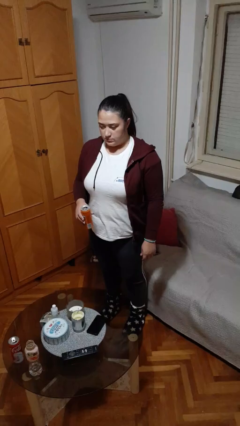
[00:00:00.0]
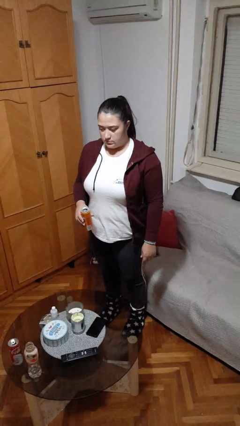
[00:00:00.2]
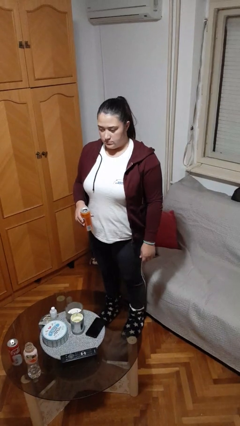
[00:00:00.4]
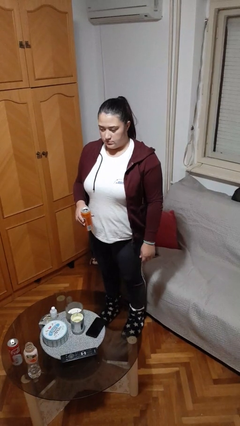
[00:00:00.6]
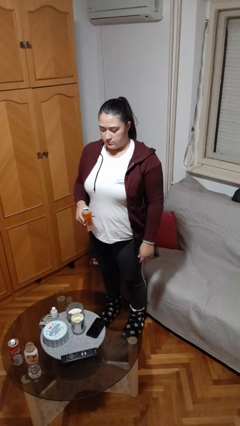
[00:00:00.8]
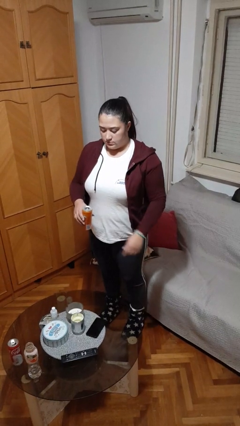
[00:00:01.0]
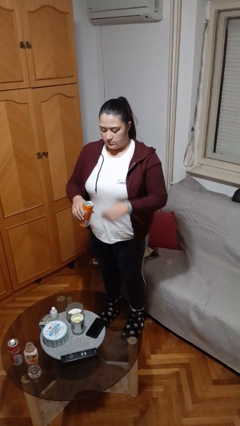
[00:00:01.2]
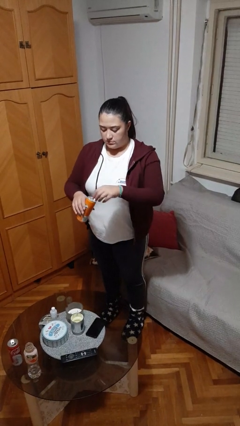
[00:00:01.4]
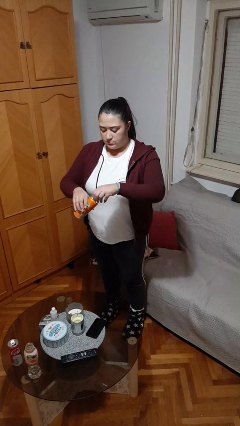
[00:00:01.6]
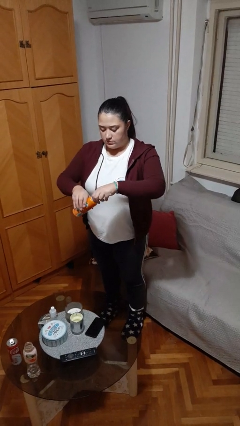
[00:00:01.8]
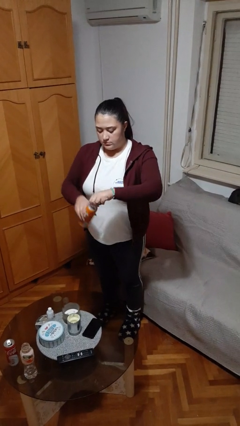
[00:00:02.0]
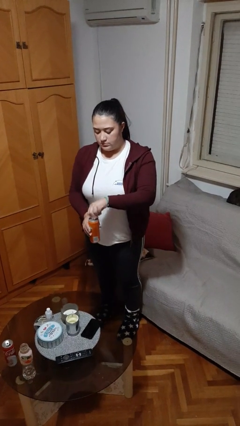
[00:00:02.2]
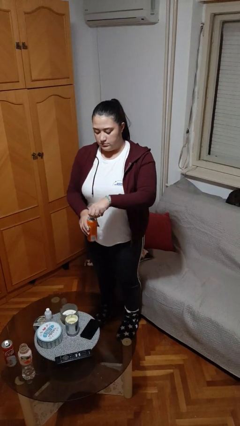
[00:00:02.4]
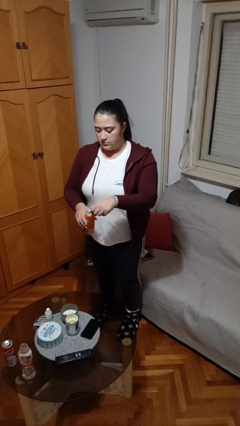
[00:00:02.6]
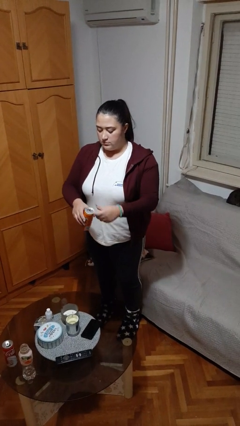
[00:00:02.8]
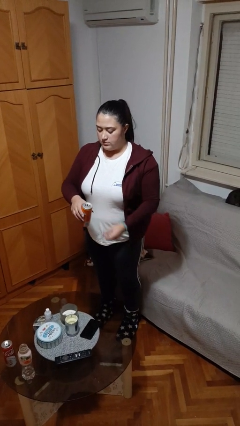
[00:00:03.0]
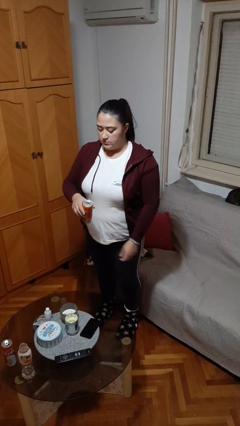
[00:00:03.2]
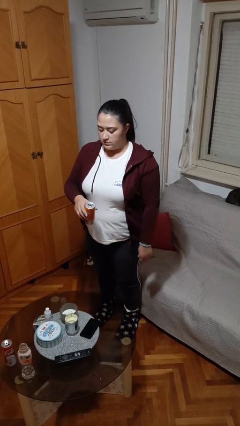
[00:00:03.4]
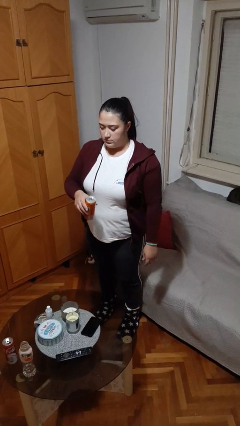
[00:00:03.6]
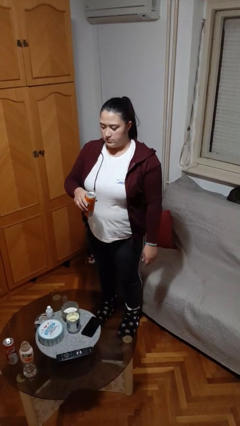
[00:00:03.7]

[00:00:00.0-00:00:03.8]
person opens beverage can

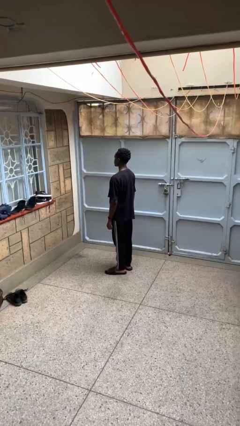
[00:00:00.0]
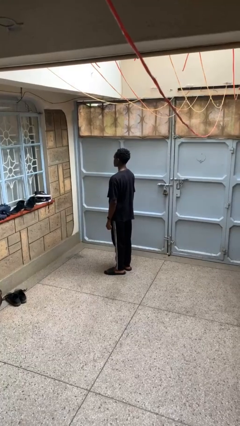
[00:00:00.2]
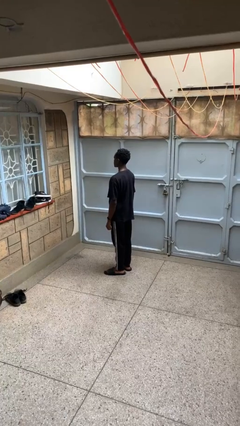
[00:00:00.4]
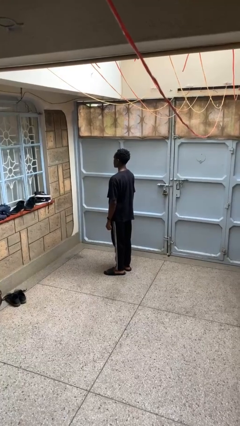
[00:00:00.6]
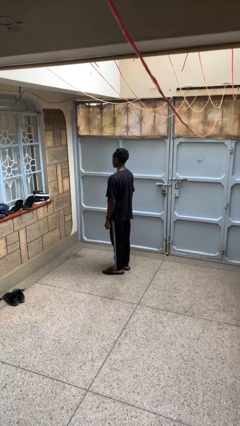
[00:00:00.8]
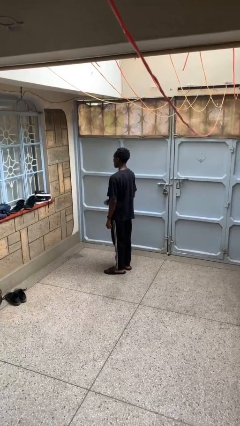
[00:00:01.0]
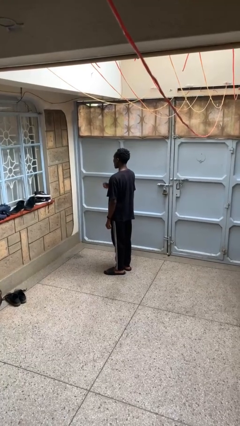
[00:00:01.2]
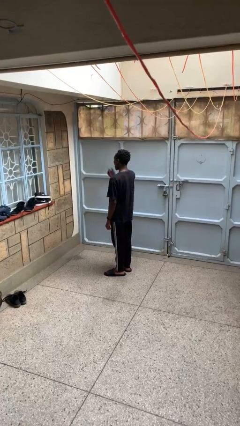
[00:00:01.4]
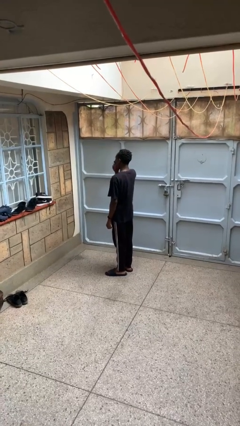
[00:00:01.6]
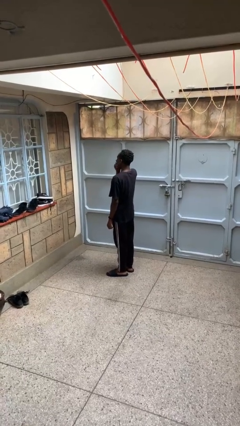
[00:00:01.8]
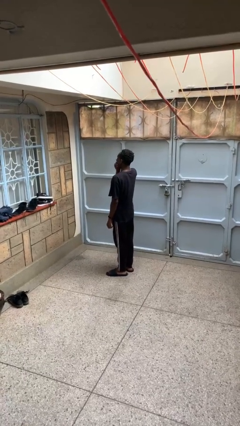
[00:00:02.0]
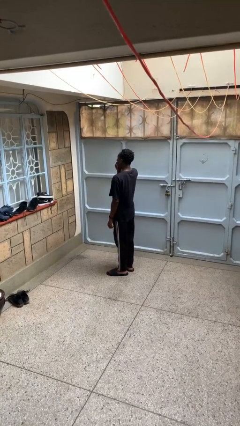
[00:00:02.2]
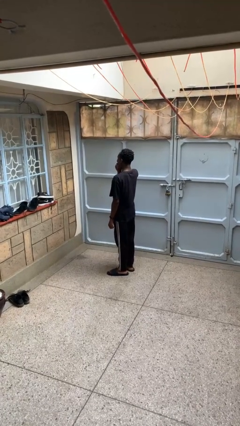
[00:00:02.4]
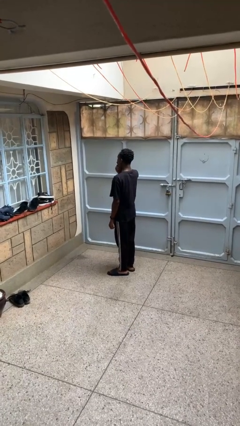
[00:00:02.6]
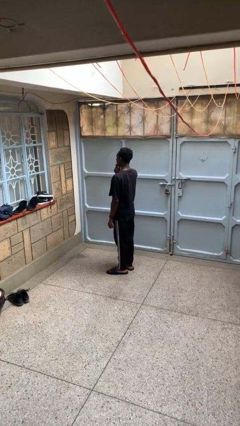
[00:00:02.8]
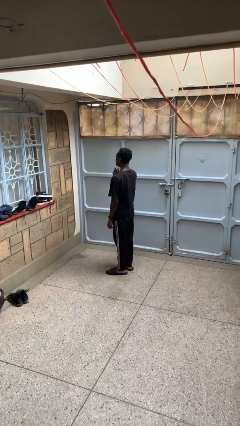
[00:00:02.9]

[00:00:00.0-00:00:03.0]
person yawns

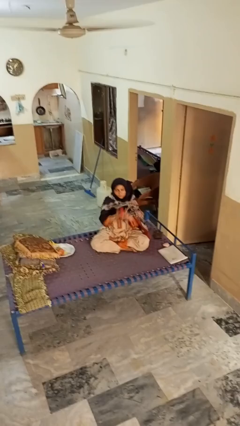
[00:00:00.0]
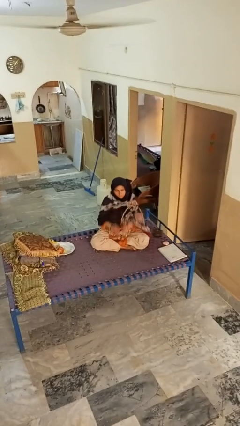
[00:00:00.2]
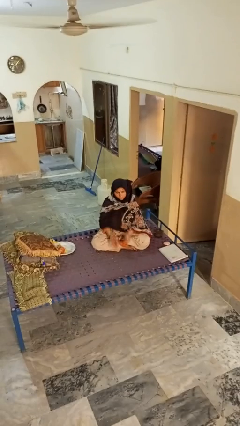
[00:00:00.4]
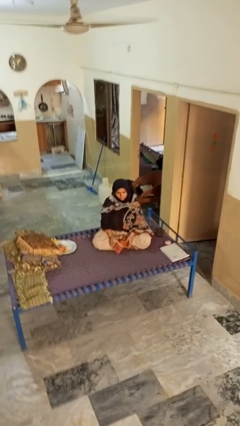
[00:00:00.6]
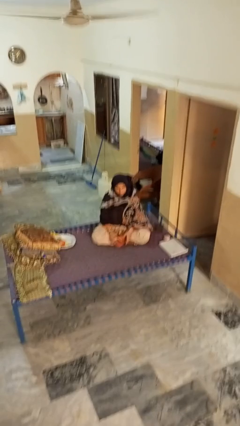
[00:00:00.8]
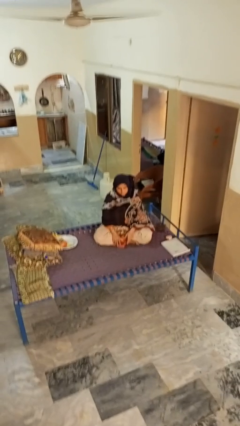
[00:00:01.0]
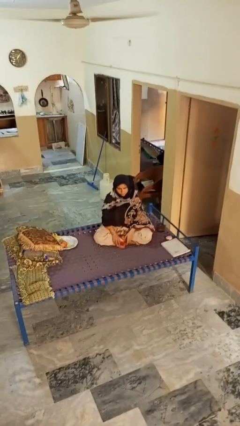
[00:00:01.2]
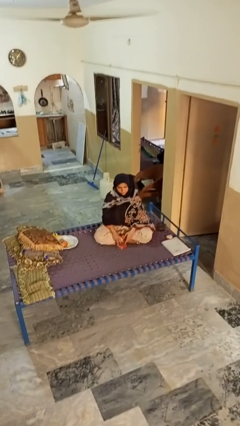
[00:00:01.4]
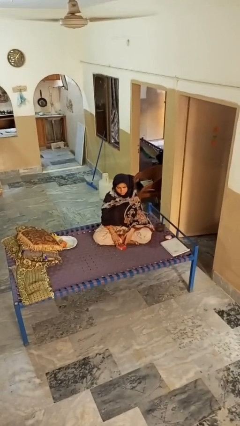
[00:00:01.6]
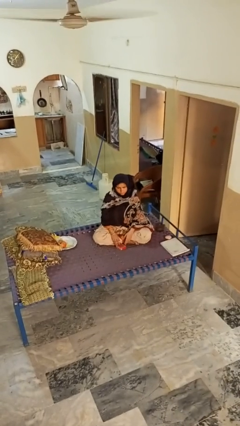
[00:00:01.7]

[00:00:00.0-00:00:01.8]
person catches dropped object

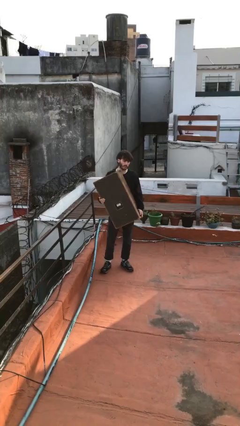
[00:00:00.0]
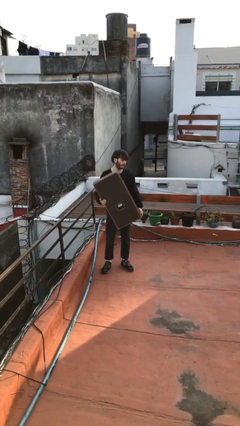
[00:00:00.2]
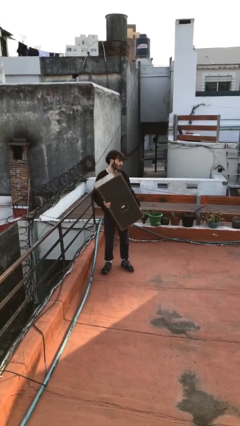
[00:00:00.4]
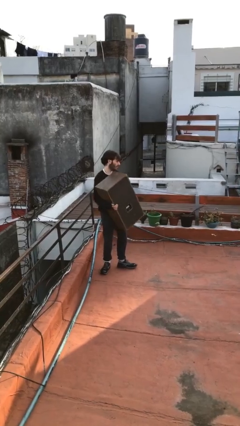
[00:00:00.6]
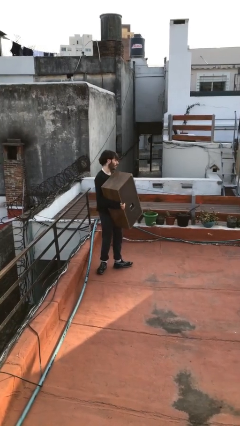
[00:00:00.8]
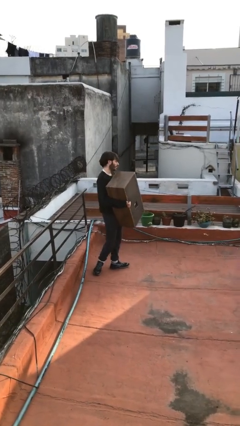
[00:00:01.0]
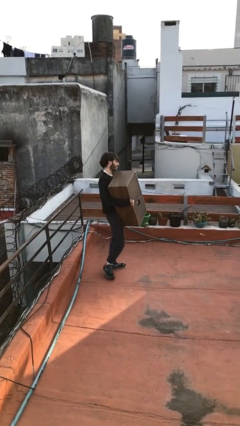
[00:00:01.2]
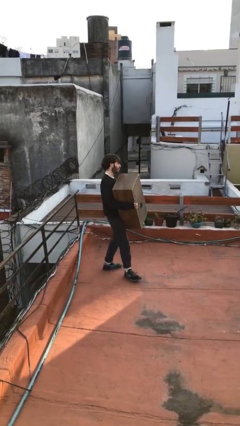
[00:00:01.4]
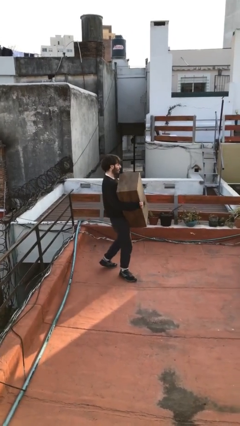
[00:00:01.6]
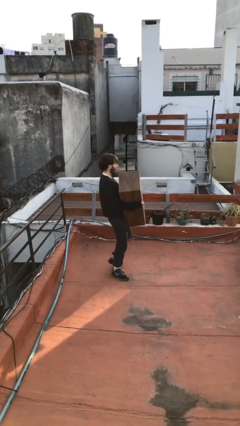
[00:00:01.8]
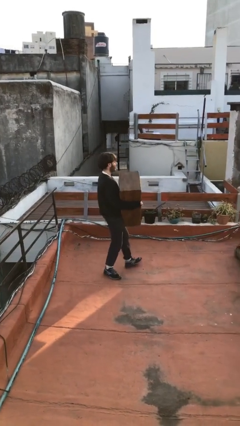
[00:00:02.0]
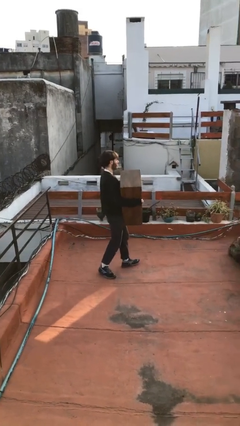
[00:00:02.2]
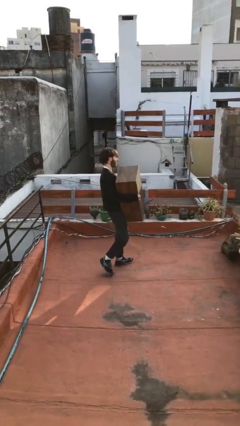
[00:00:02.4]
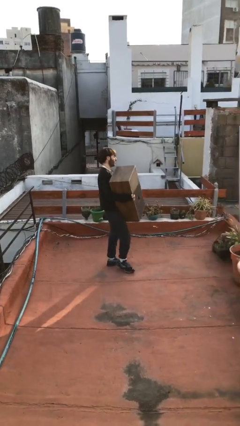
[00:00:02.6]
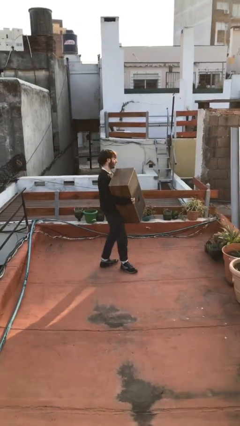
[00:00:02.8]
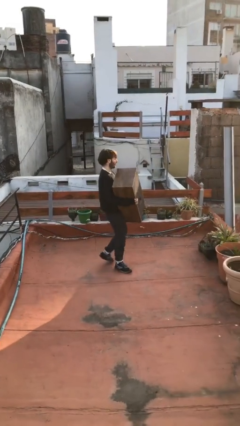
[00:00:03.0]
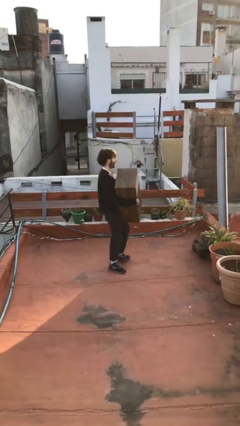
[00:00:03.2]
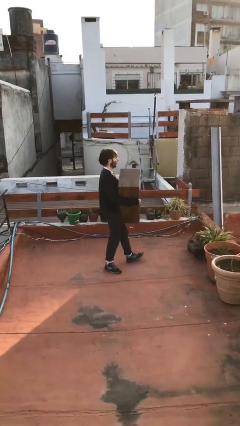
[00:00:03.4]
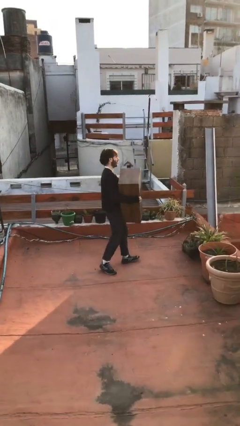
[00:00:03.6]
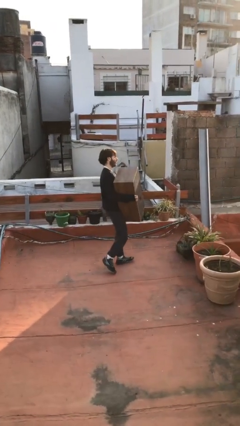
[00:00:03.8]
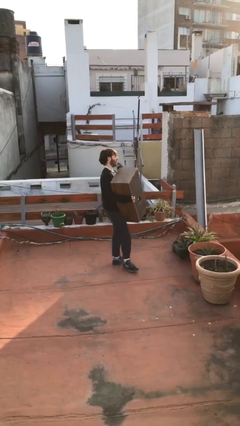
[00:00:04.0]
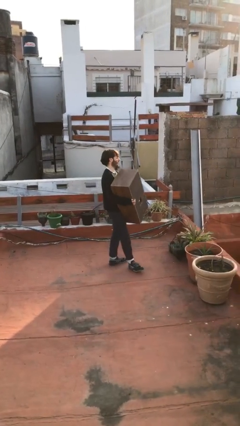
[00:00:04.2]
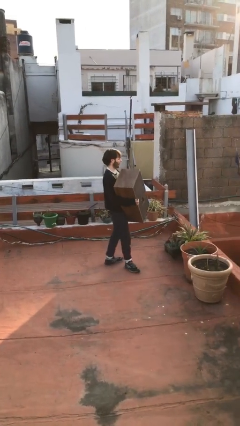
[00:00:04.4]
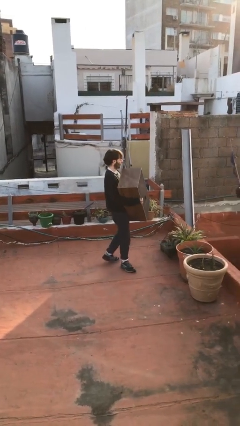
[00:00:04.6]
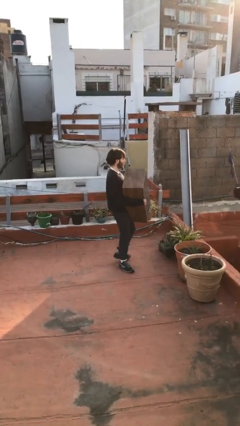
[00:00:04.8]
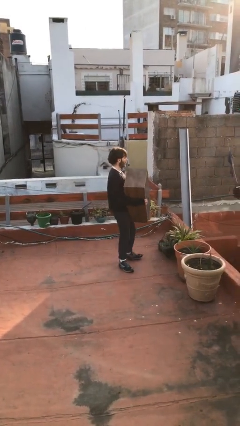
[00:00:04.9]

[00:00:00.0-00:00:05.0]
person carries furniture

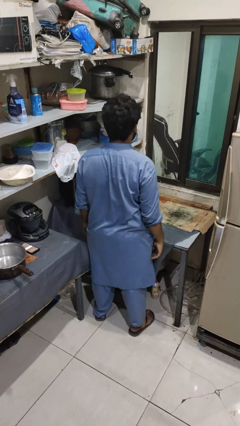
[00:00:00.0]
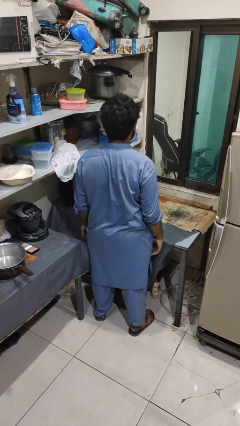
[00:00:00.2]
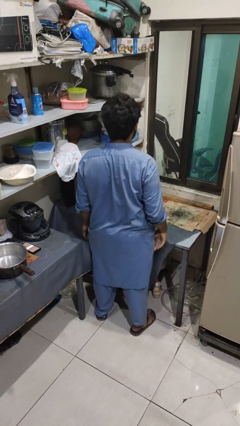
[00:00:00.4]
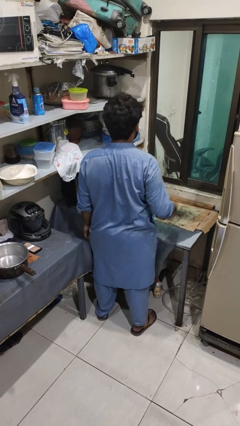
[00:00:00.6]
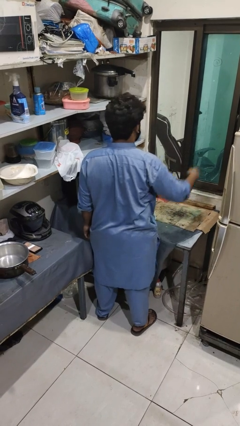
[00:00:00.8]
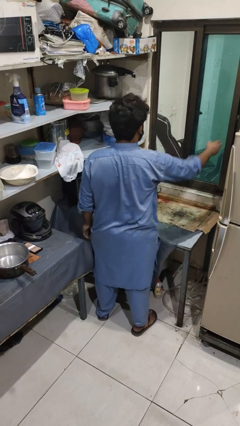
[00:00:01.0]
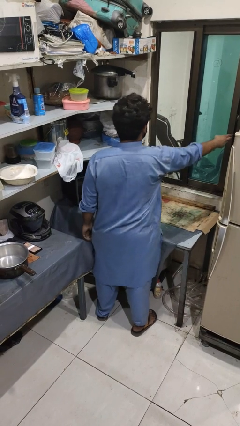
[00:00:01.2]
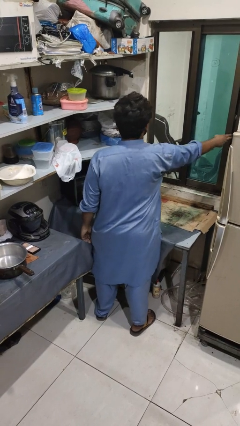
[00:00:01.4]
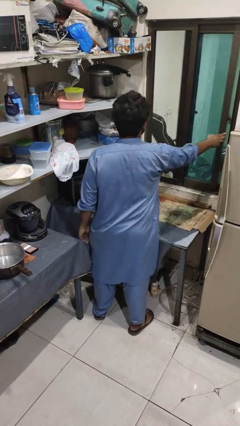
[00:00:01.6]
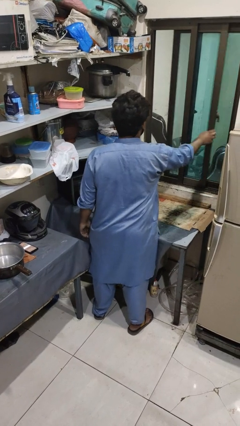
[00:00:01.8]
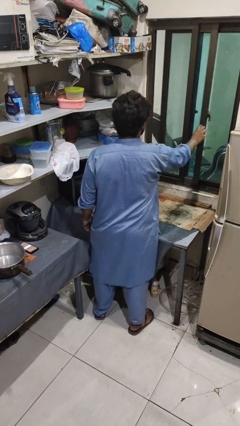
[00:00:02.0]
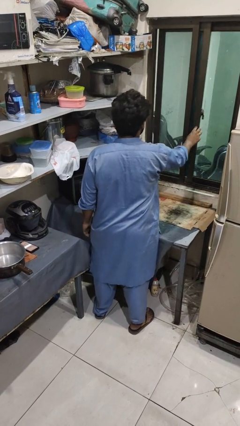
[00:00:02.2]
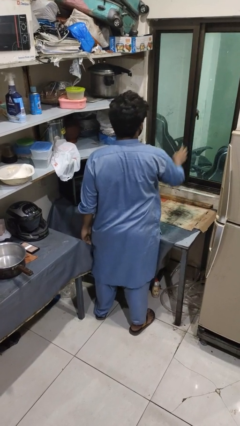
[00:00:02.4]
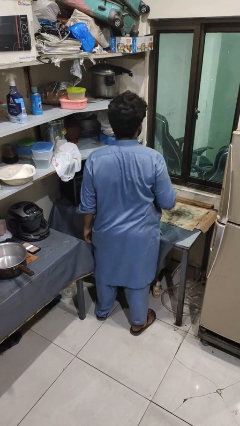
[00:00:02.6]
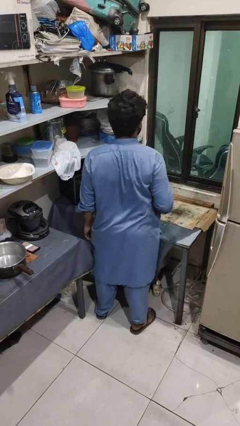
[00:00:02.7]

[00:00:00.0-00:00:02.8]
person closes home window

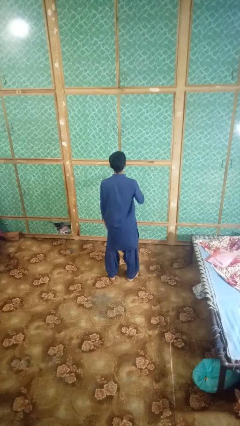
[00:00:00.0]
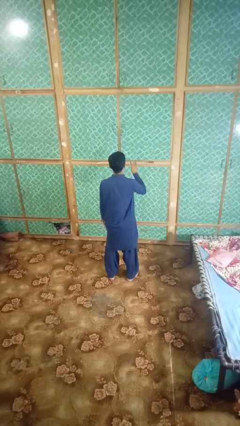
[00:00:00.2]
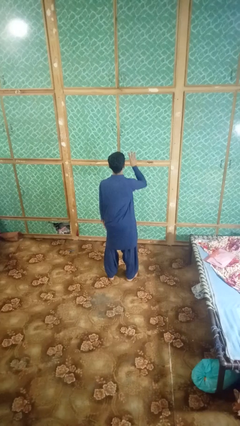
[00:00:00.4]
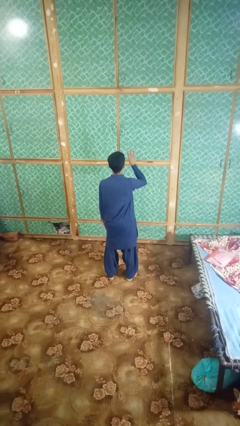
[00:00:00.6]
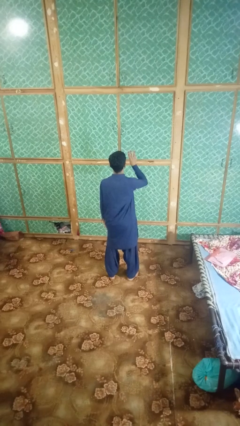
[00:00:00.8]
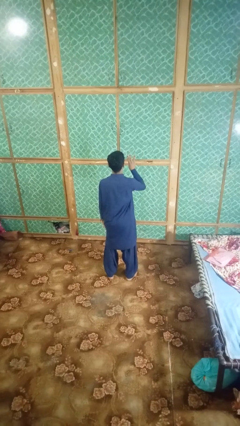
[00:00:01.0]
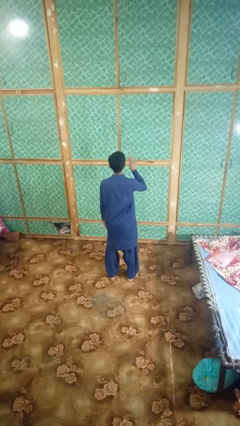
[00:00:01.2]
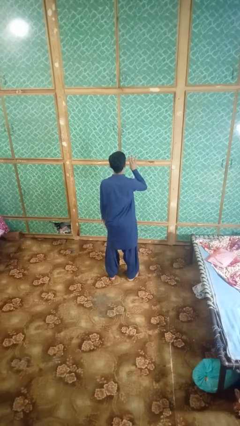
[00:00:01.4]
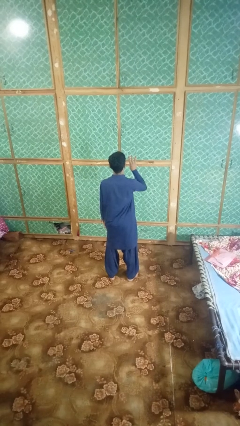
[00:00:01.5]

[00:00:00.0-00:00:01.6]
person gestures number three
